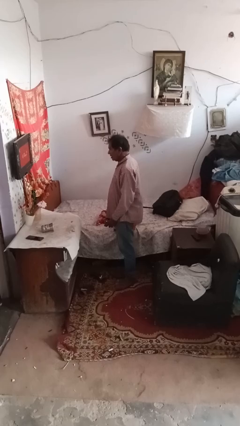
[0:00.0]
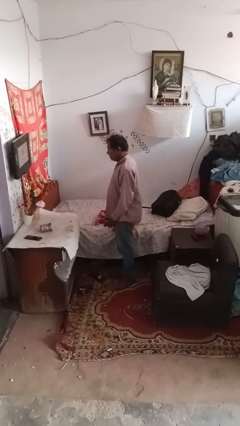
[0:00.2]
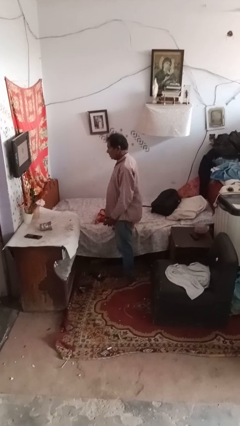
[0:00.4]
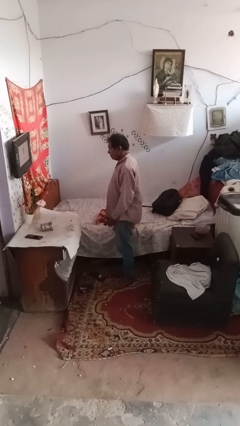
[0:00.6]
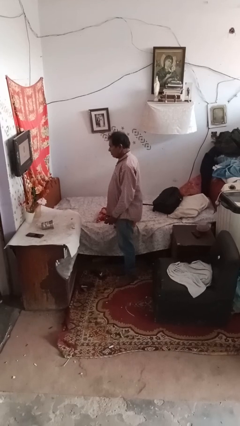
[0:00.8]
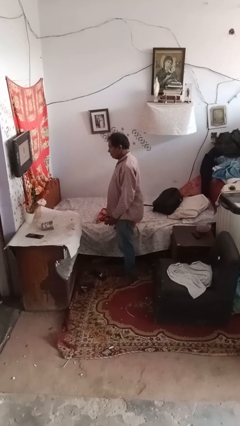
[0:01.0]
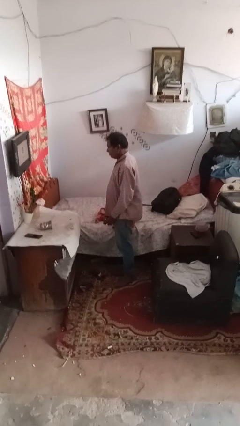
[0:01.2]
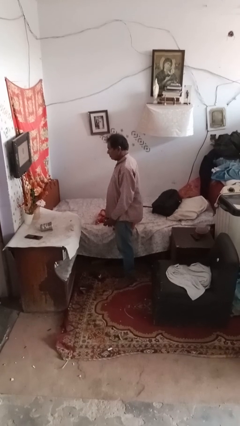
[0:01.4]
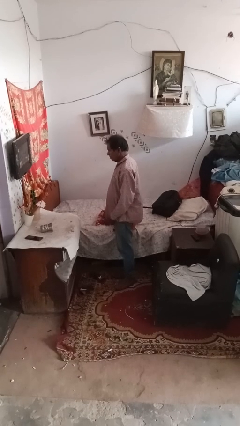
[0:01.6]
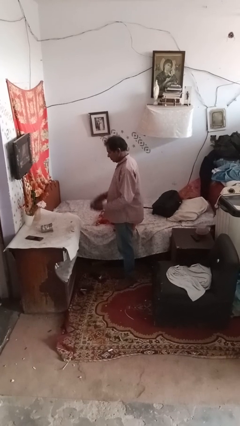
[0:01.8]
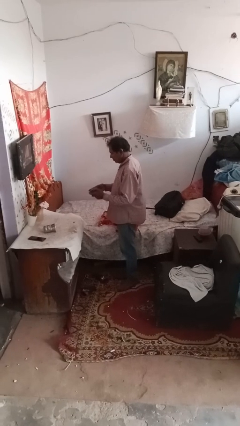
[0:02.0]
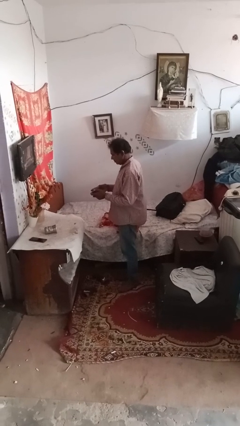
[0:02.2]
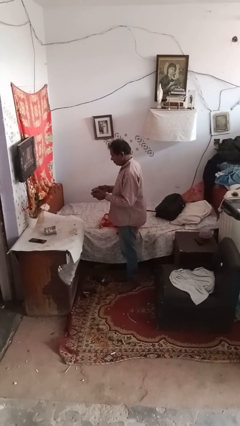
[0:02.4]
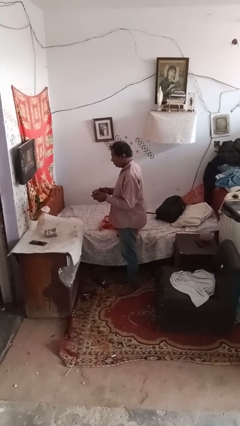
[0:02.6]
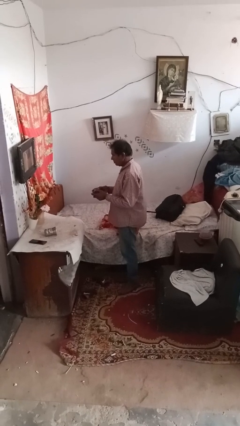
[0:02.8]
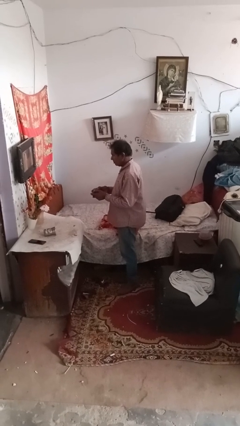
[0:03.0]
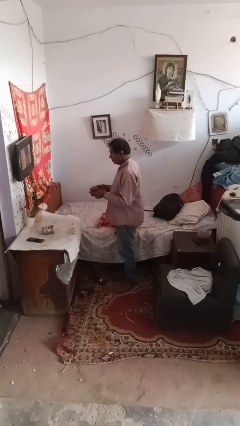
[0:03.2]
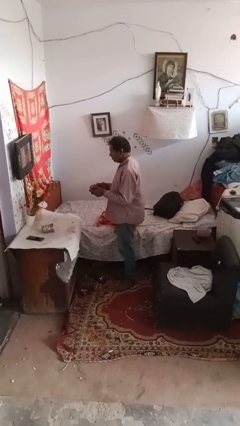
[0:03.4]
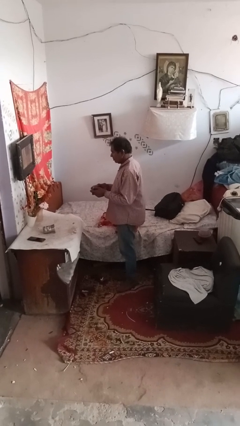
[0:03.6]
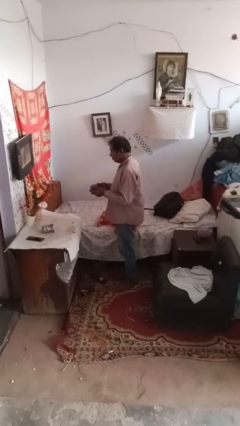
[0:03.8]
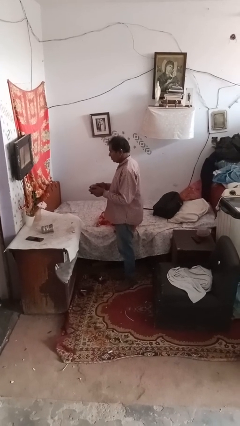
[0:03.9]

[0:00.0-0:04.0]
person interacts with handheld game

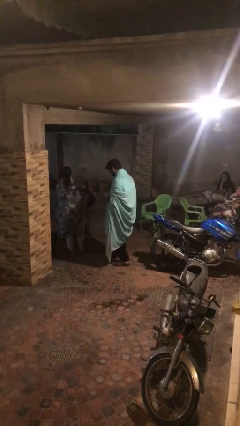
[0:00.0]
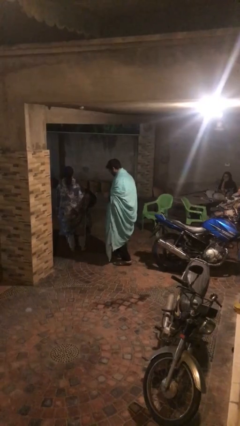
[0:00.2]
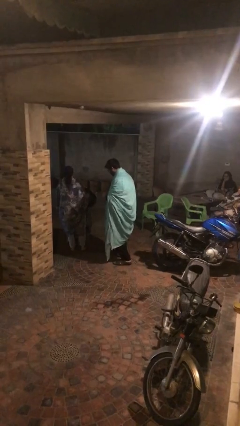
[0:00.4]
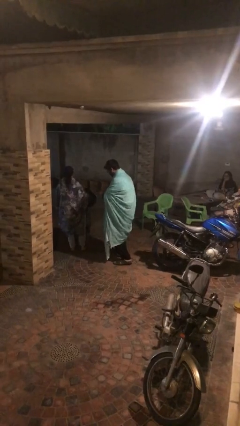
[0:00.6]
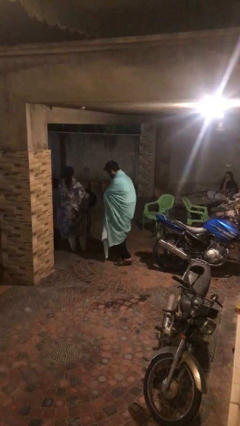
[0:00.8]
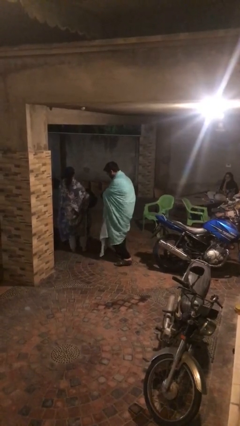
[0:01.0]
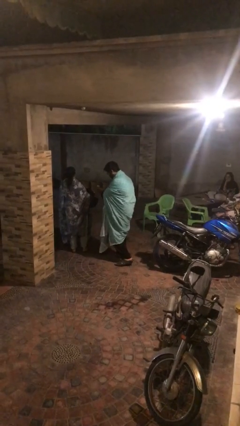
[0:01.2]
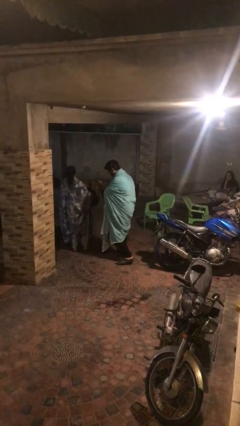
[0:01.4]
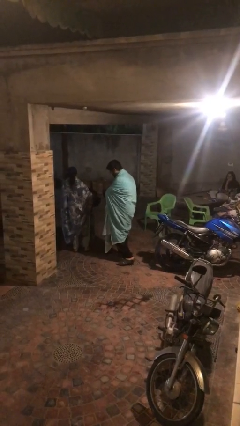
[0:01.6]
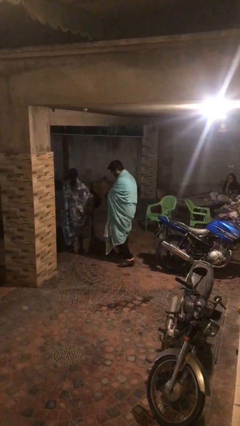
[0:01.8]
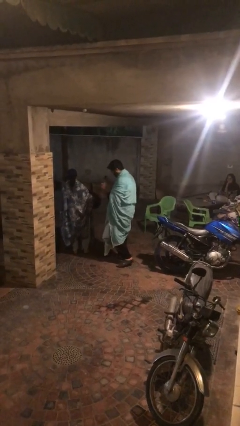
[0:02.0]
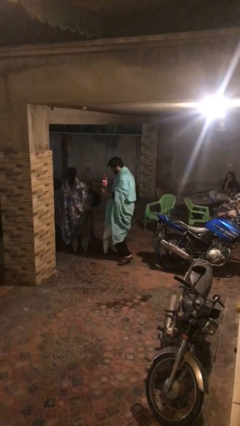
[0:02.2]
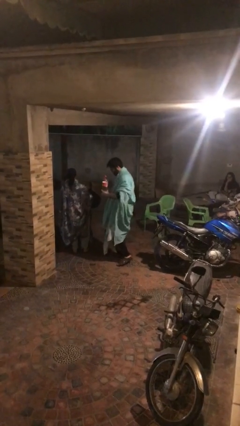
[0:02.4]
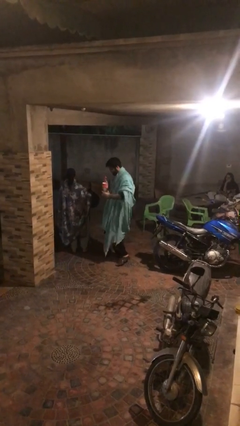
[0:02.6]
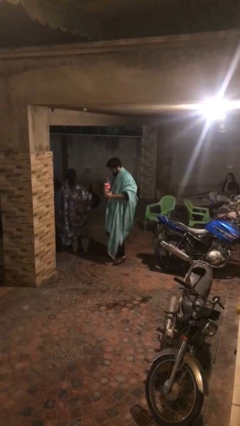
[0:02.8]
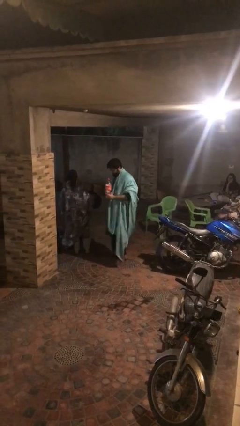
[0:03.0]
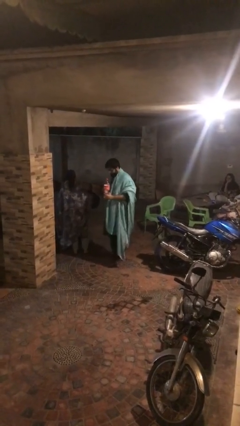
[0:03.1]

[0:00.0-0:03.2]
person steals object from person

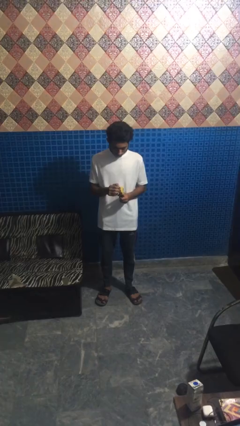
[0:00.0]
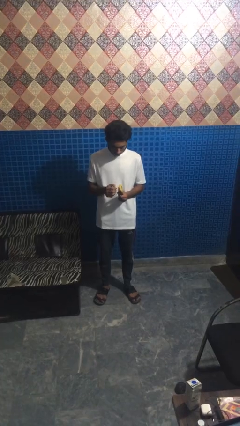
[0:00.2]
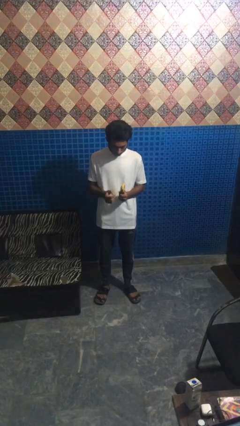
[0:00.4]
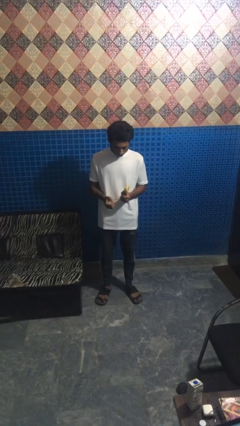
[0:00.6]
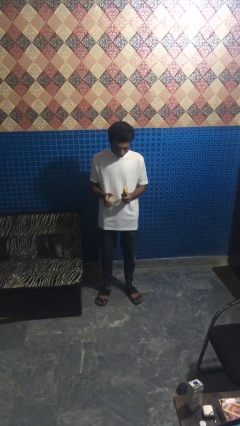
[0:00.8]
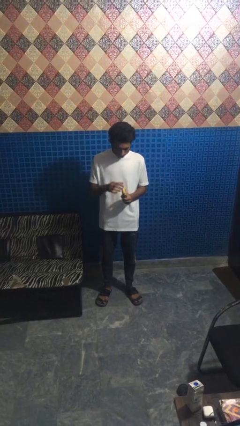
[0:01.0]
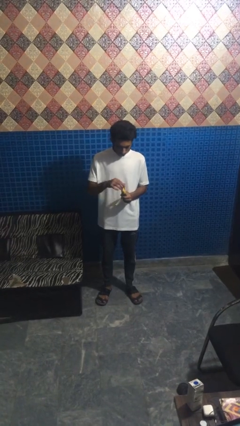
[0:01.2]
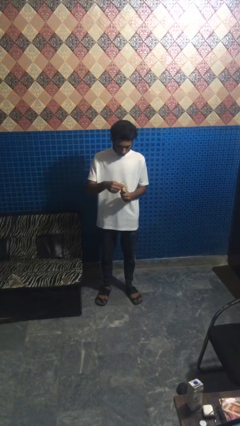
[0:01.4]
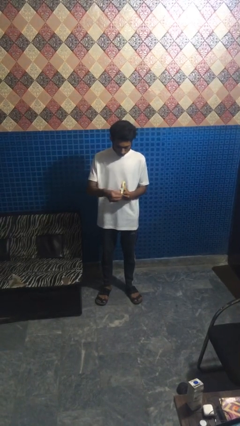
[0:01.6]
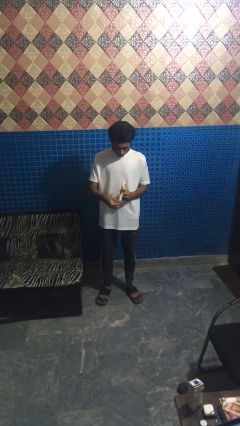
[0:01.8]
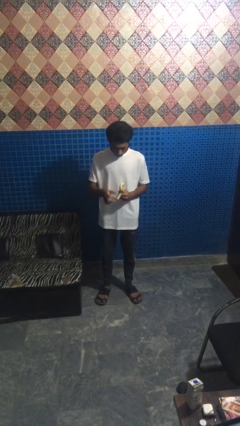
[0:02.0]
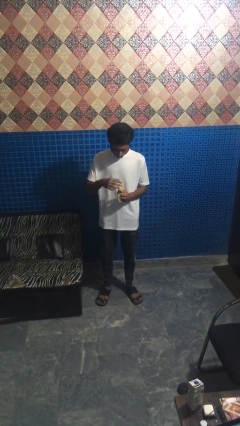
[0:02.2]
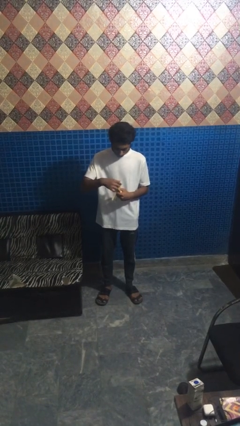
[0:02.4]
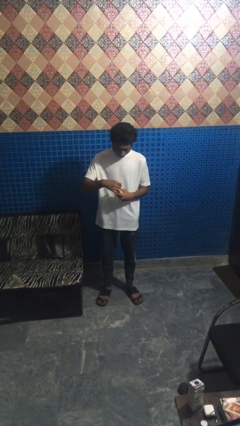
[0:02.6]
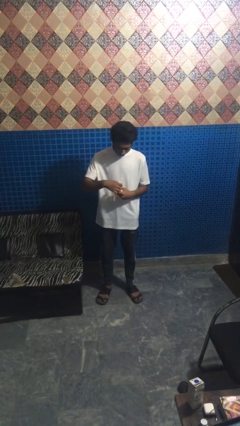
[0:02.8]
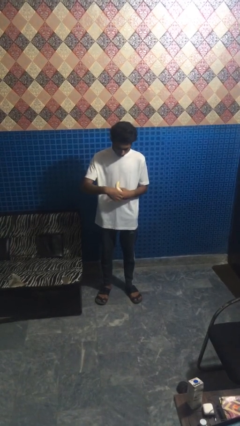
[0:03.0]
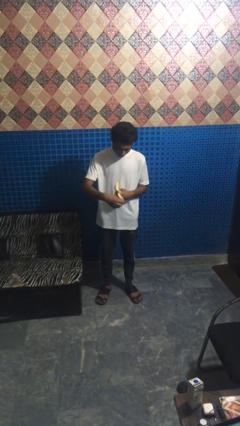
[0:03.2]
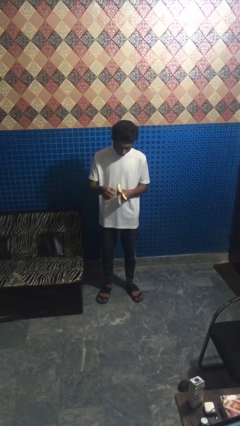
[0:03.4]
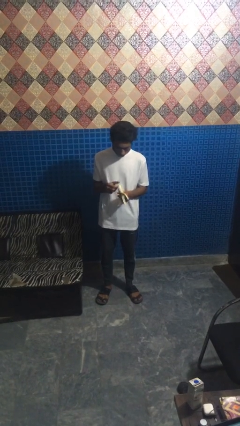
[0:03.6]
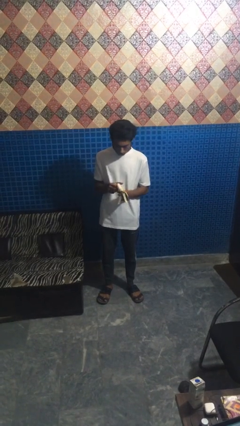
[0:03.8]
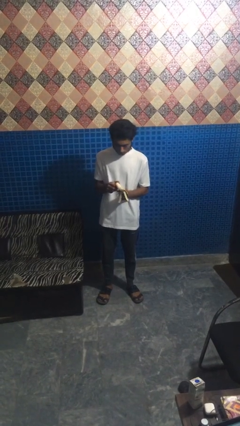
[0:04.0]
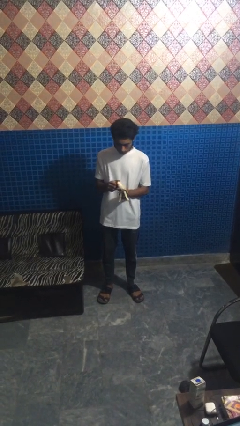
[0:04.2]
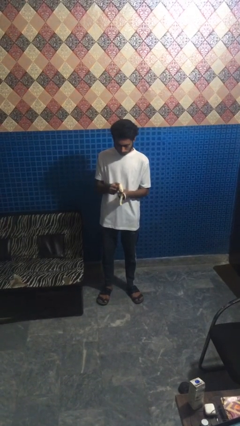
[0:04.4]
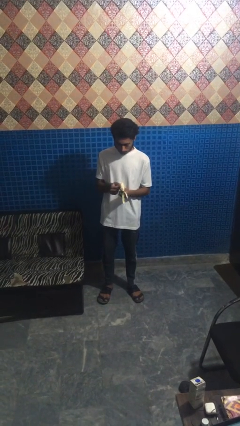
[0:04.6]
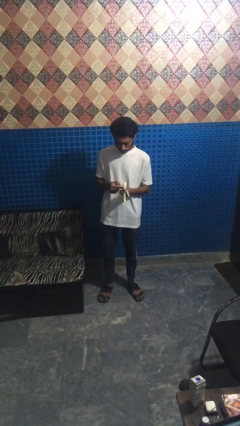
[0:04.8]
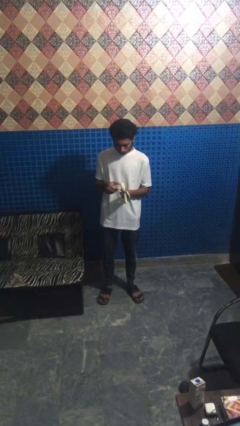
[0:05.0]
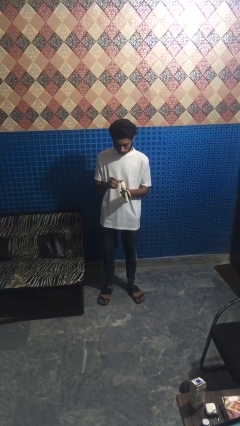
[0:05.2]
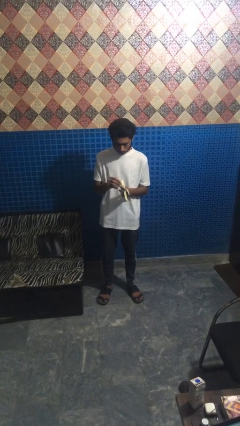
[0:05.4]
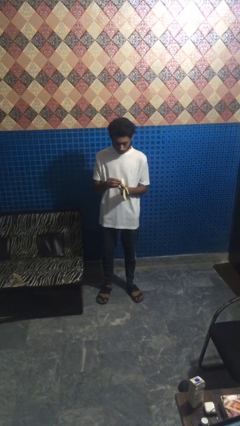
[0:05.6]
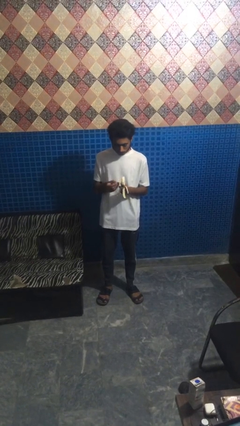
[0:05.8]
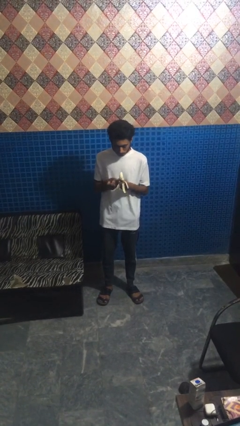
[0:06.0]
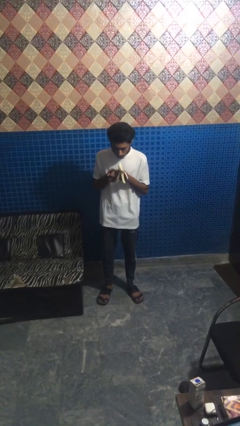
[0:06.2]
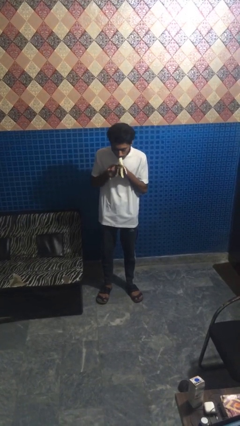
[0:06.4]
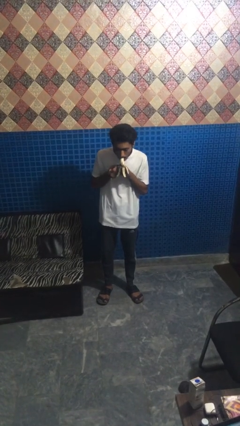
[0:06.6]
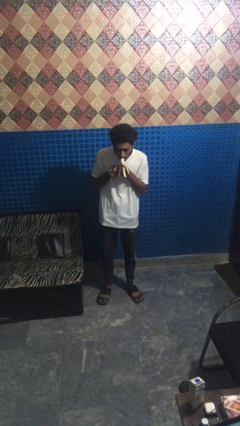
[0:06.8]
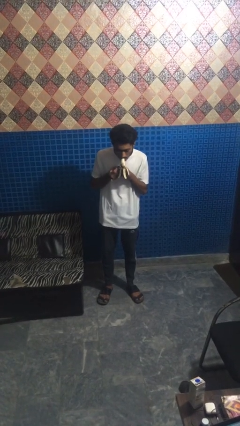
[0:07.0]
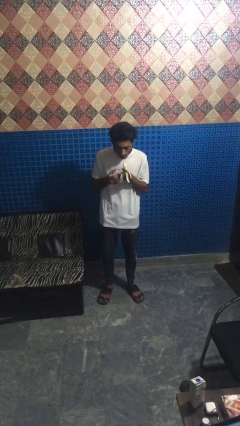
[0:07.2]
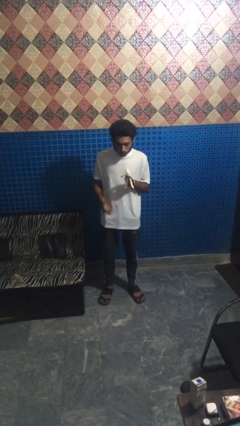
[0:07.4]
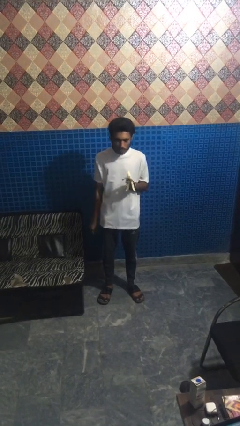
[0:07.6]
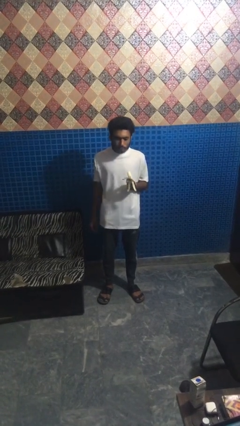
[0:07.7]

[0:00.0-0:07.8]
person eats banana

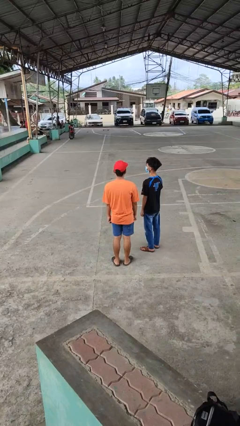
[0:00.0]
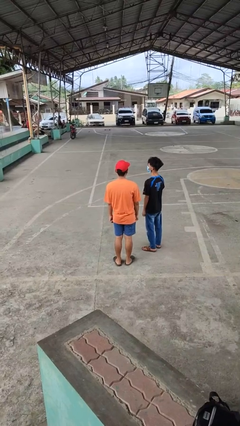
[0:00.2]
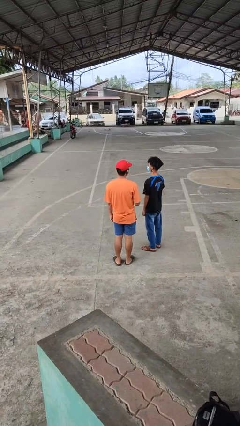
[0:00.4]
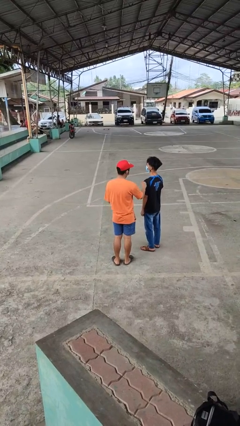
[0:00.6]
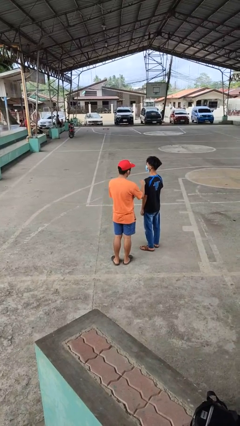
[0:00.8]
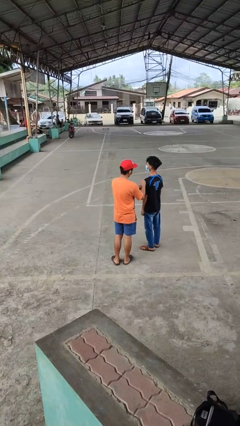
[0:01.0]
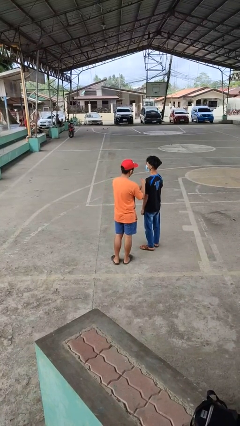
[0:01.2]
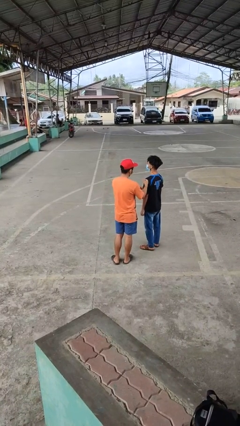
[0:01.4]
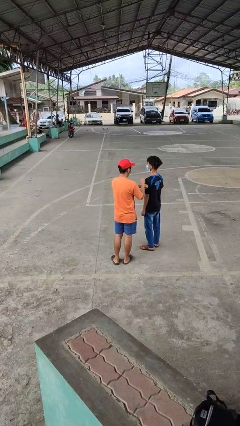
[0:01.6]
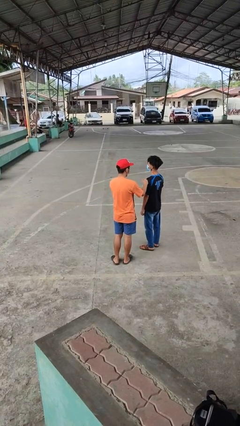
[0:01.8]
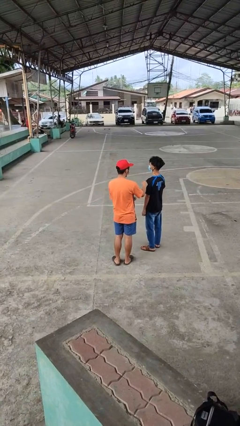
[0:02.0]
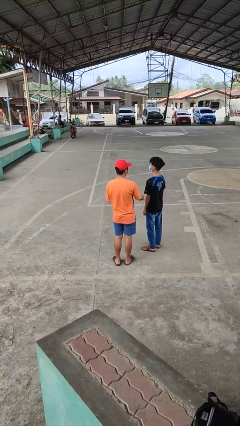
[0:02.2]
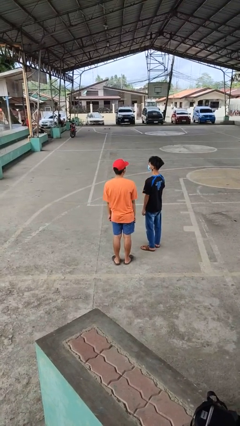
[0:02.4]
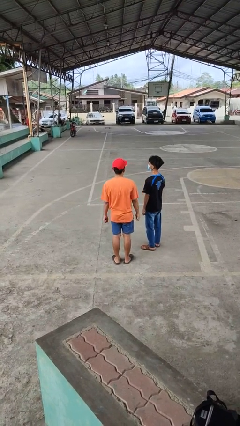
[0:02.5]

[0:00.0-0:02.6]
person pounds shoulders of person
